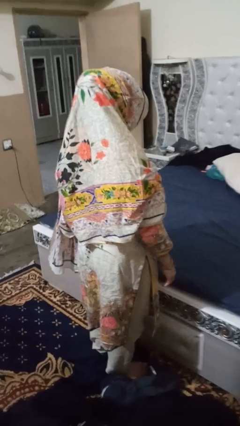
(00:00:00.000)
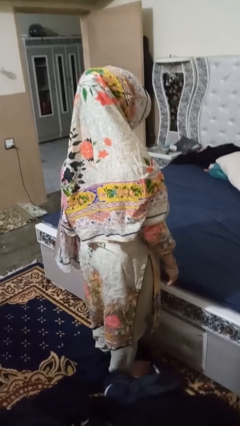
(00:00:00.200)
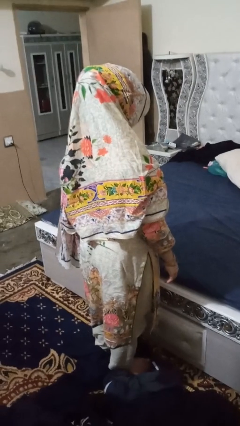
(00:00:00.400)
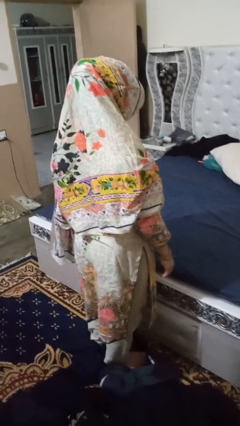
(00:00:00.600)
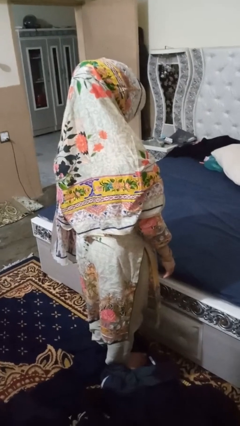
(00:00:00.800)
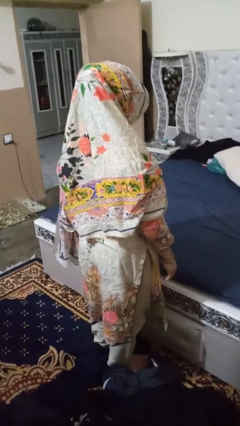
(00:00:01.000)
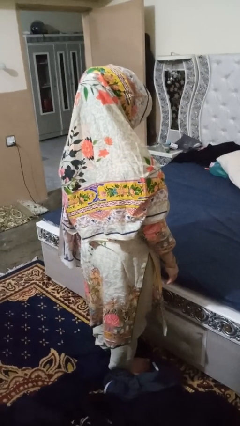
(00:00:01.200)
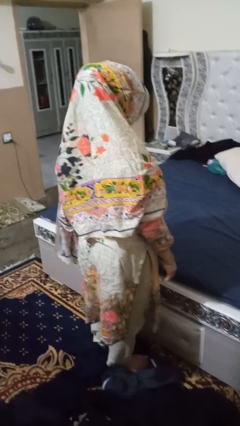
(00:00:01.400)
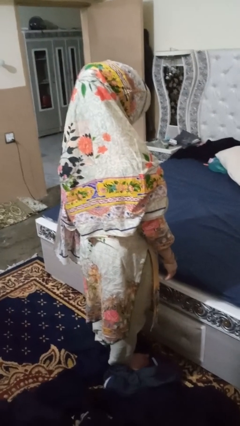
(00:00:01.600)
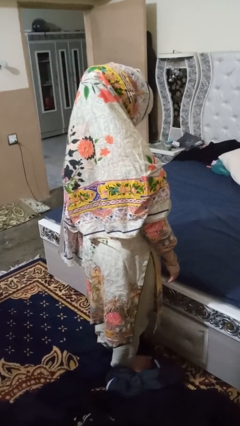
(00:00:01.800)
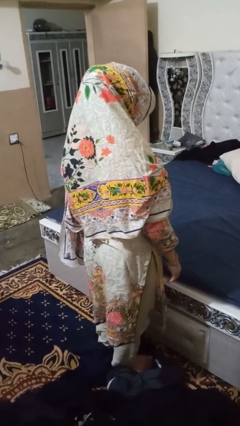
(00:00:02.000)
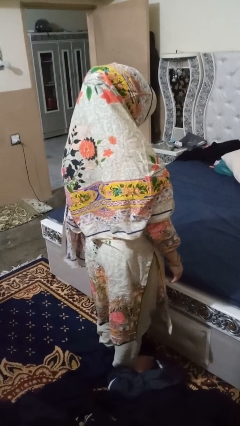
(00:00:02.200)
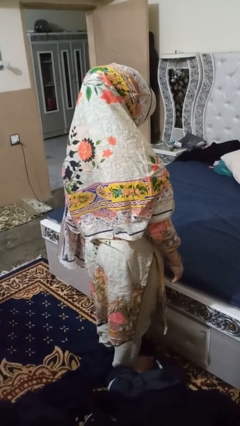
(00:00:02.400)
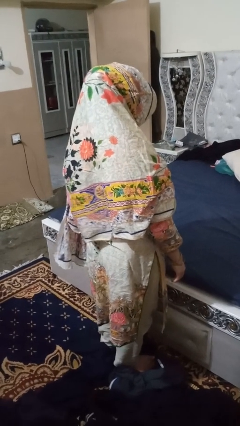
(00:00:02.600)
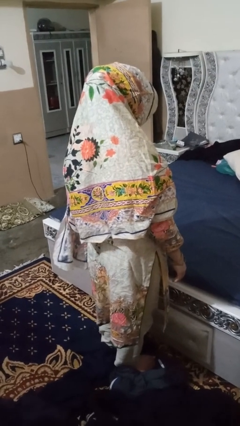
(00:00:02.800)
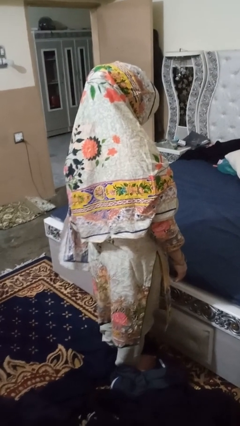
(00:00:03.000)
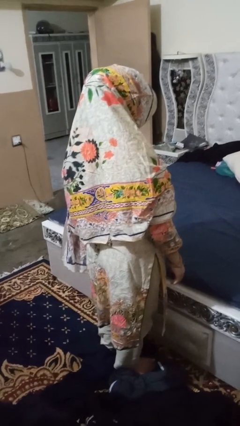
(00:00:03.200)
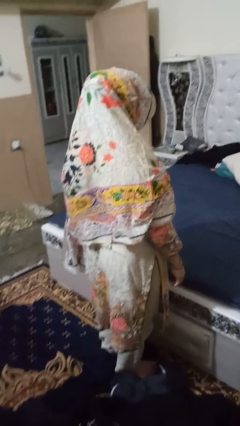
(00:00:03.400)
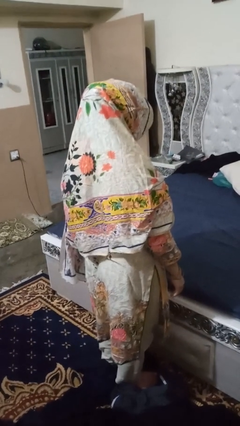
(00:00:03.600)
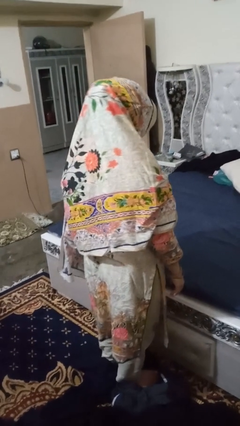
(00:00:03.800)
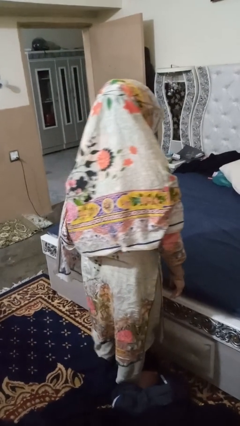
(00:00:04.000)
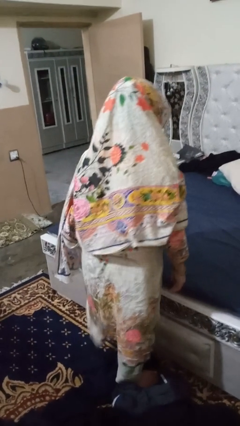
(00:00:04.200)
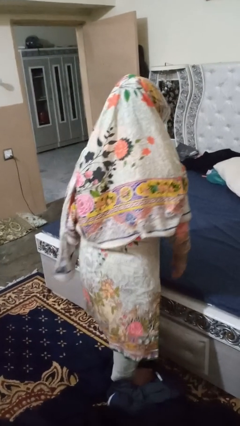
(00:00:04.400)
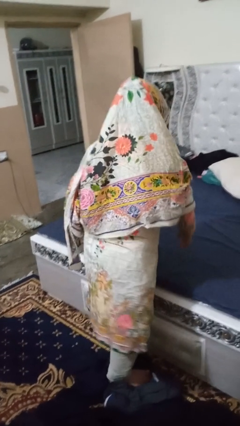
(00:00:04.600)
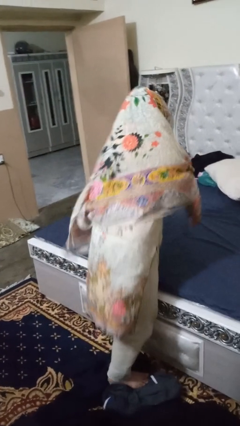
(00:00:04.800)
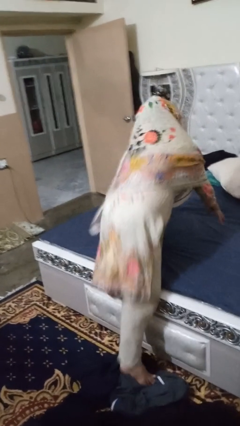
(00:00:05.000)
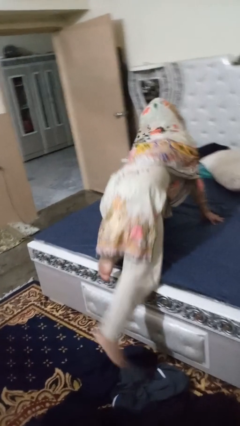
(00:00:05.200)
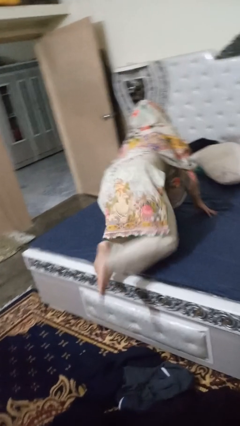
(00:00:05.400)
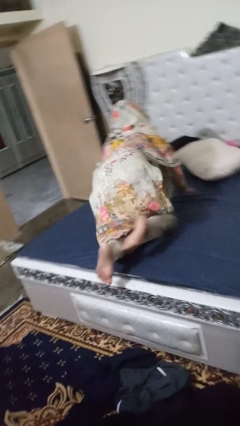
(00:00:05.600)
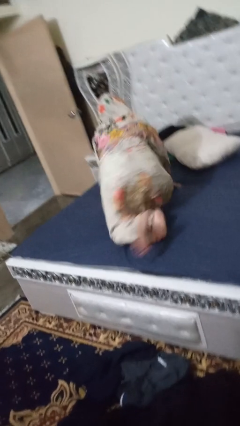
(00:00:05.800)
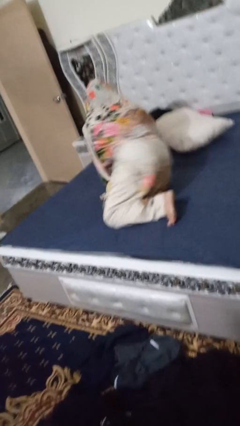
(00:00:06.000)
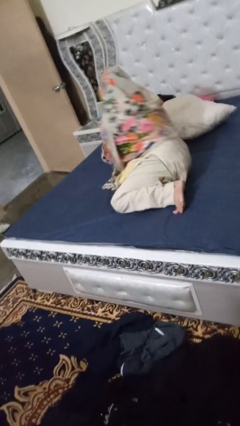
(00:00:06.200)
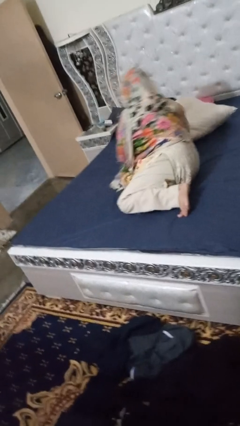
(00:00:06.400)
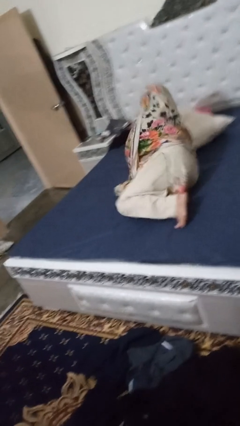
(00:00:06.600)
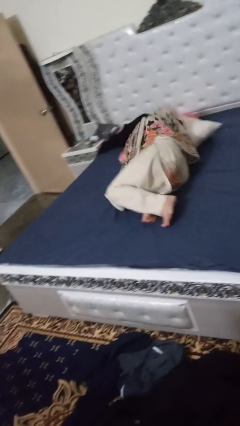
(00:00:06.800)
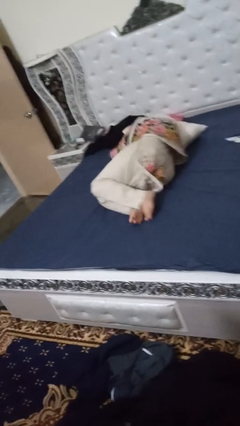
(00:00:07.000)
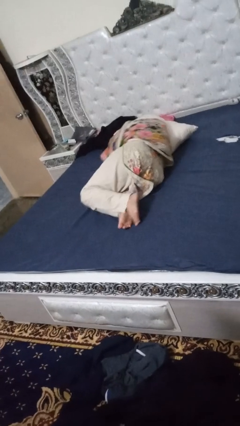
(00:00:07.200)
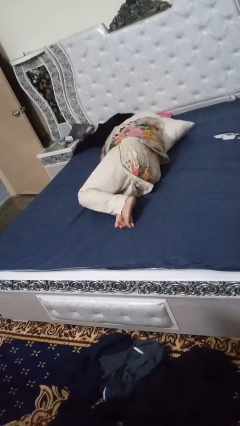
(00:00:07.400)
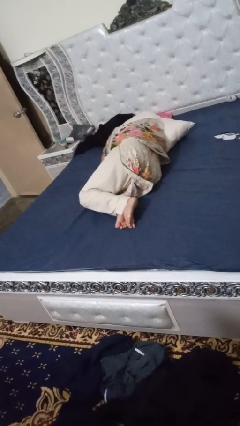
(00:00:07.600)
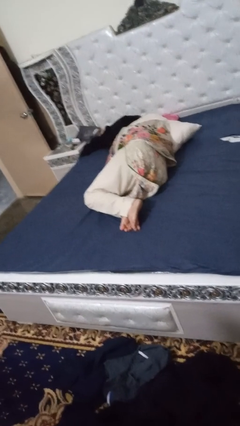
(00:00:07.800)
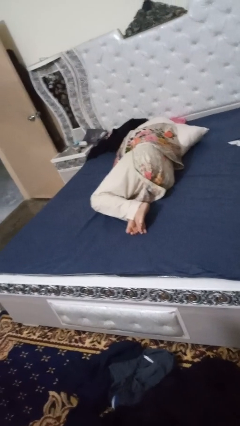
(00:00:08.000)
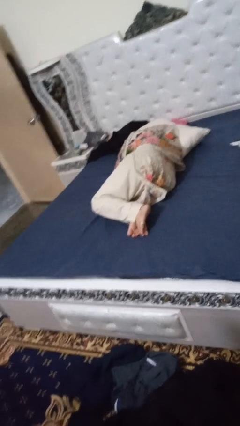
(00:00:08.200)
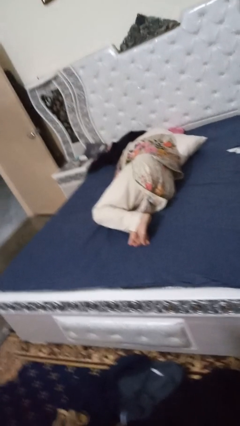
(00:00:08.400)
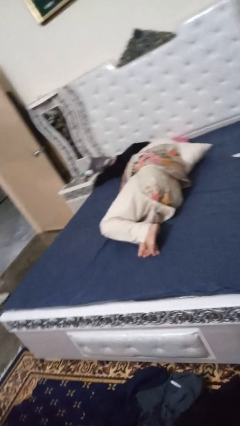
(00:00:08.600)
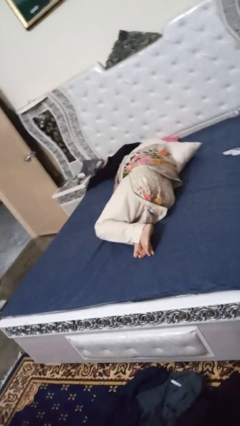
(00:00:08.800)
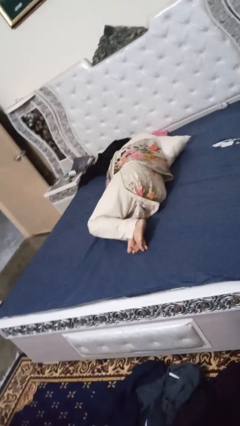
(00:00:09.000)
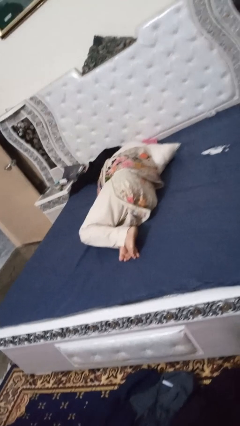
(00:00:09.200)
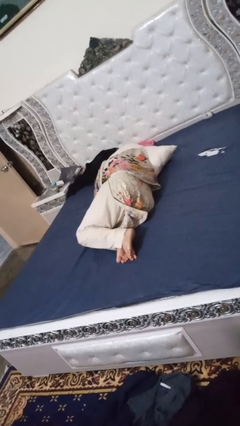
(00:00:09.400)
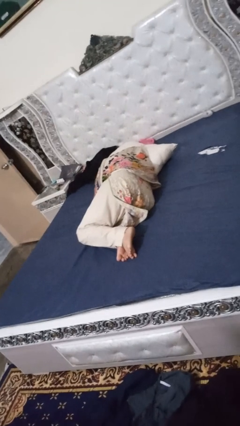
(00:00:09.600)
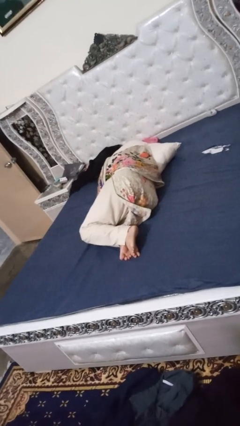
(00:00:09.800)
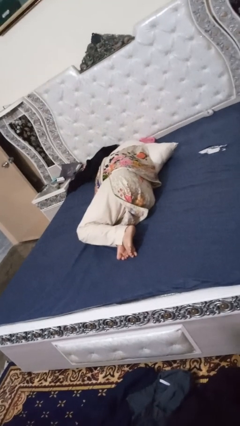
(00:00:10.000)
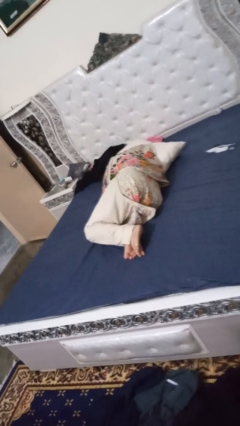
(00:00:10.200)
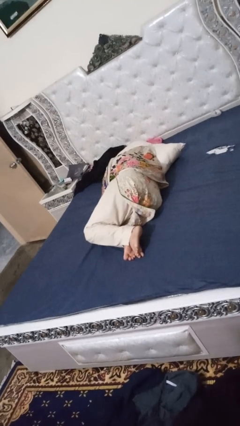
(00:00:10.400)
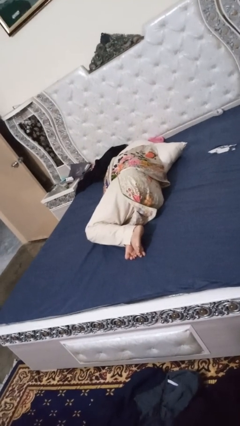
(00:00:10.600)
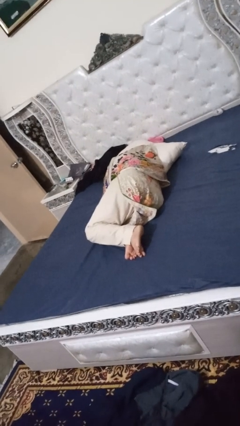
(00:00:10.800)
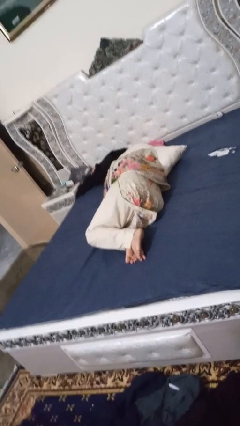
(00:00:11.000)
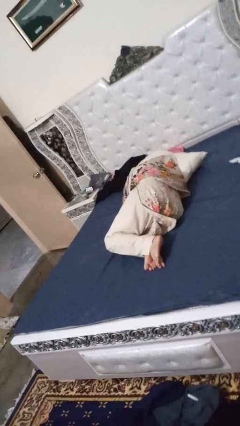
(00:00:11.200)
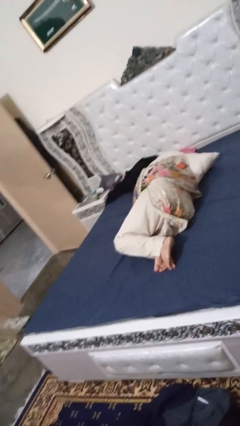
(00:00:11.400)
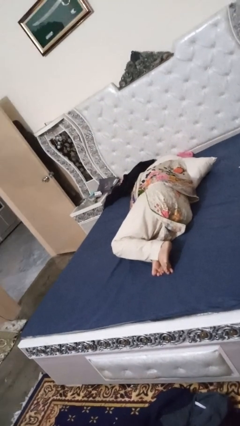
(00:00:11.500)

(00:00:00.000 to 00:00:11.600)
person lies down on bed

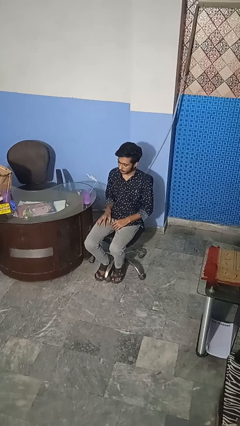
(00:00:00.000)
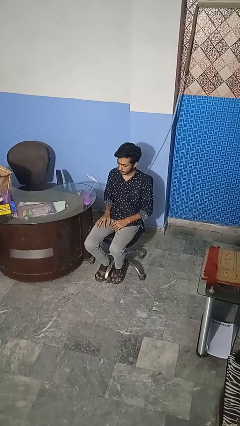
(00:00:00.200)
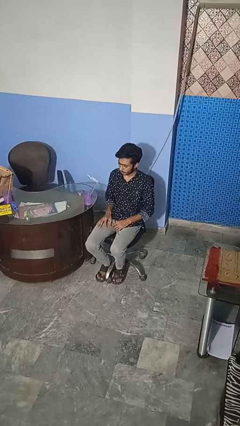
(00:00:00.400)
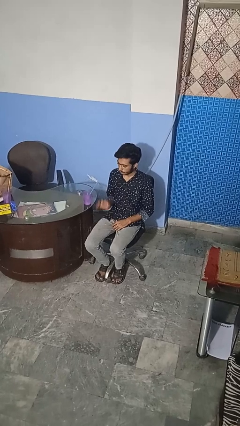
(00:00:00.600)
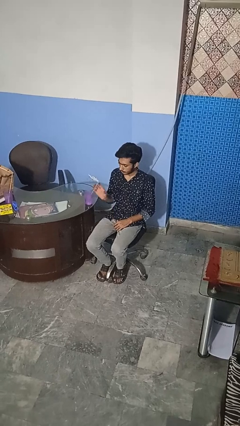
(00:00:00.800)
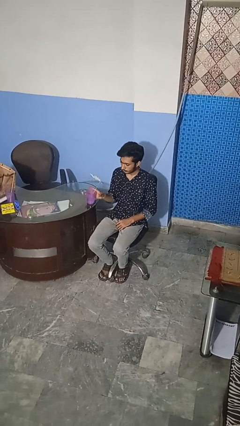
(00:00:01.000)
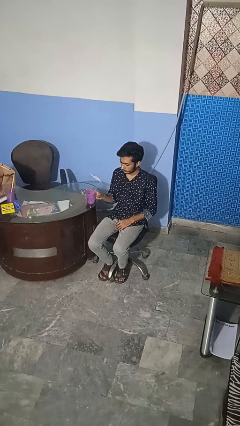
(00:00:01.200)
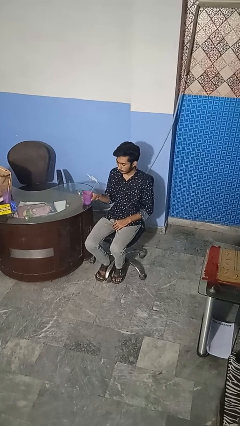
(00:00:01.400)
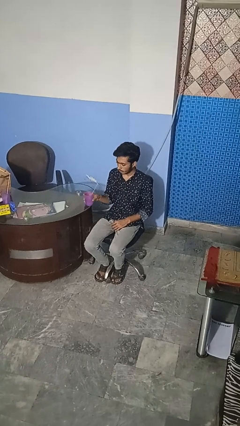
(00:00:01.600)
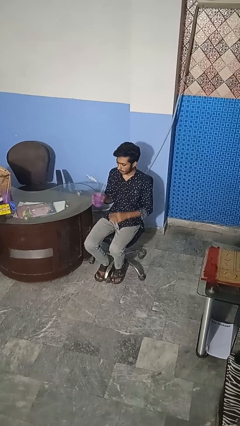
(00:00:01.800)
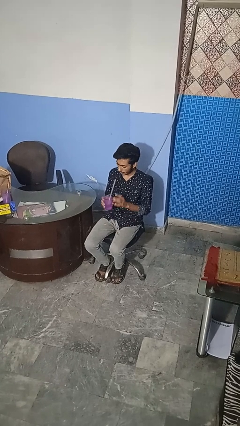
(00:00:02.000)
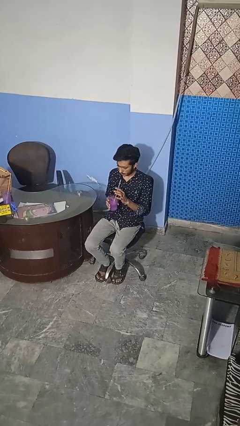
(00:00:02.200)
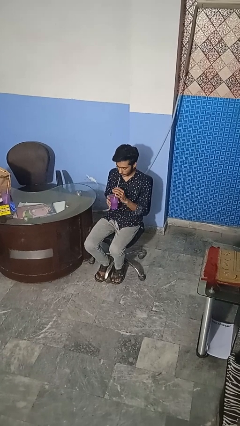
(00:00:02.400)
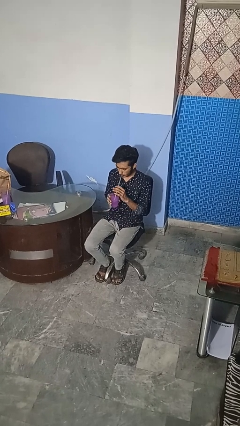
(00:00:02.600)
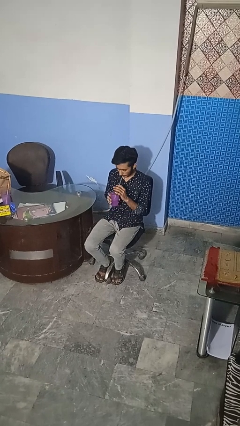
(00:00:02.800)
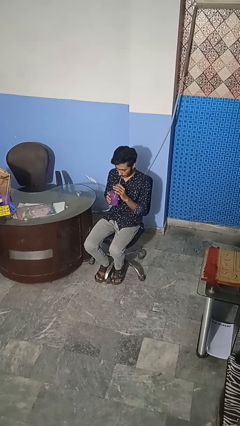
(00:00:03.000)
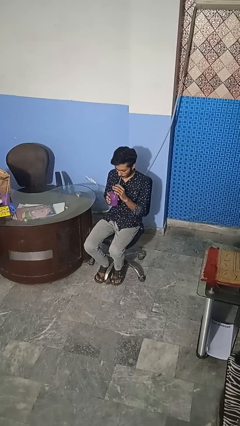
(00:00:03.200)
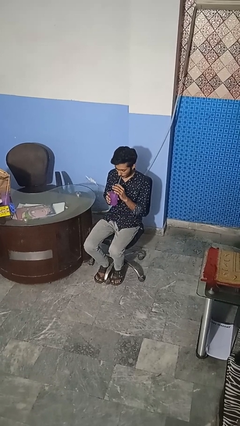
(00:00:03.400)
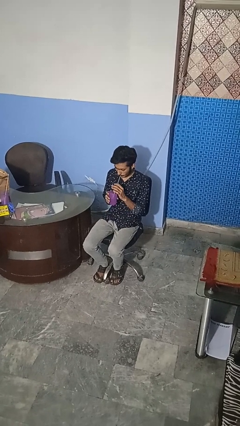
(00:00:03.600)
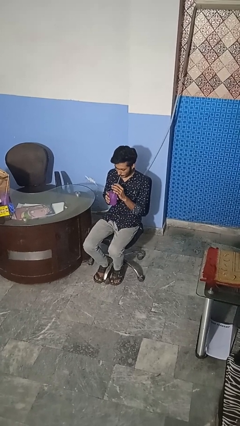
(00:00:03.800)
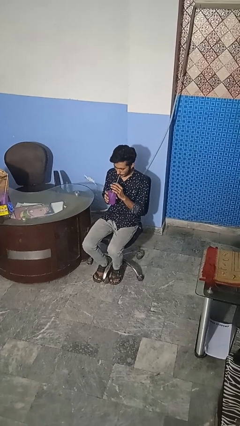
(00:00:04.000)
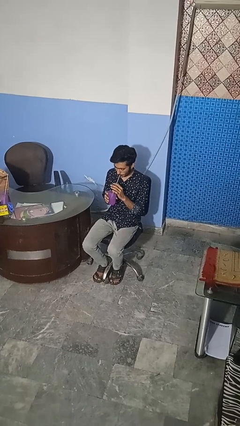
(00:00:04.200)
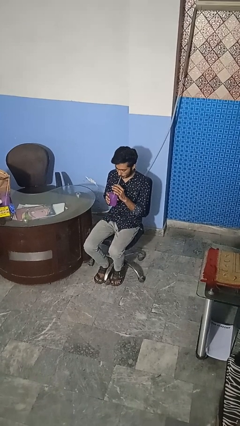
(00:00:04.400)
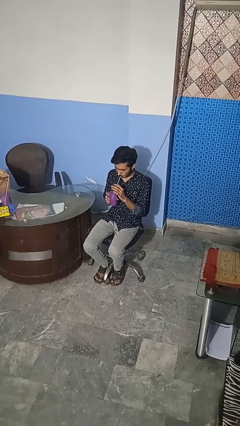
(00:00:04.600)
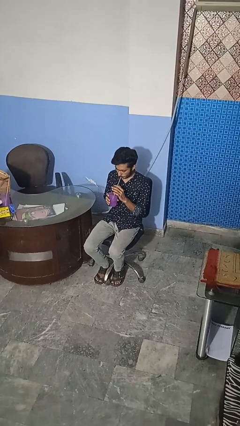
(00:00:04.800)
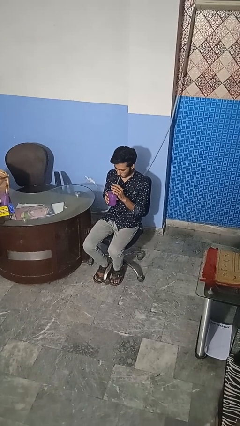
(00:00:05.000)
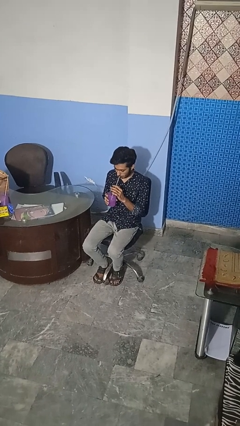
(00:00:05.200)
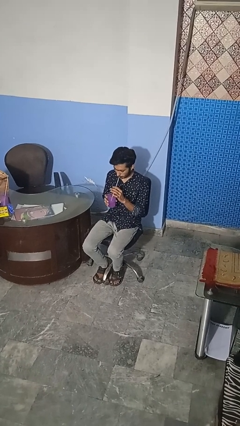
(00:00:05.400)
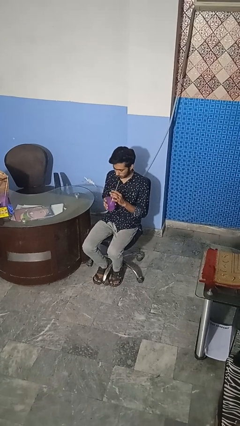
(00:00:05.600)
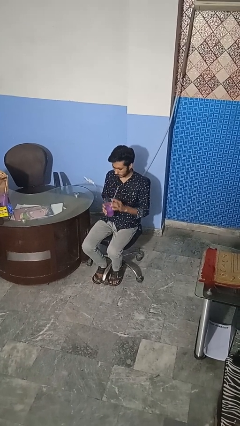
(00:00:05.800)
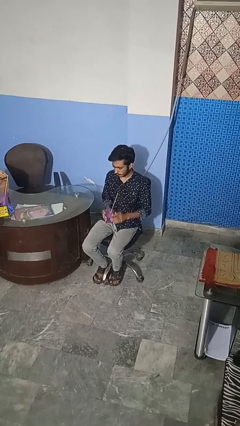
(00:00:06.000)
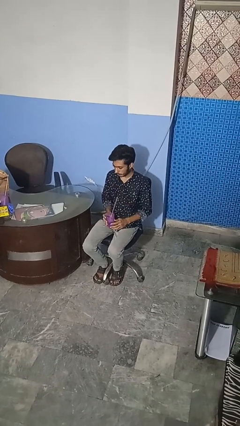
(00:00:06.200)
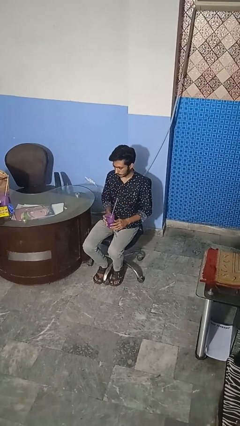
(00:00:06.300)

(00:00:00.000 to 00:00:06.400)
person drinks from straw
